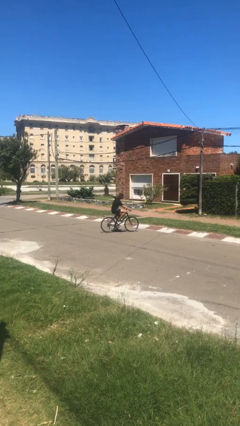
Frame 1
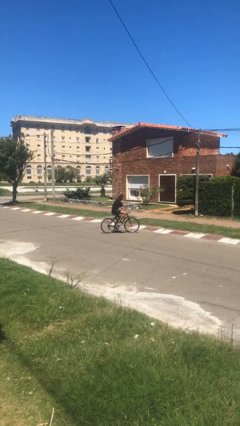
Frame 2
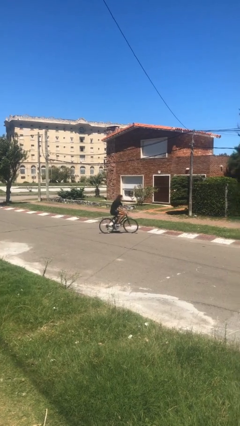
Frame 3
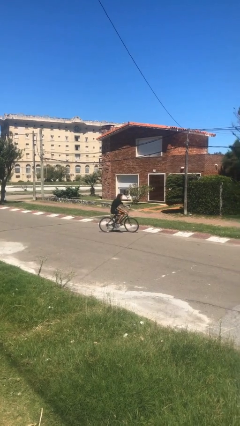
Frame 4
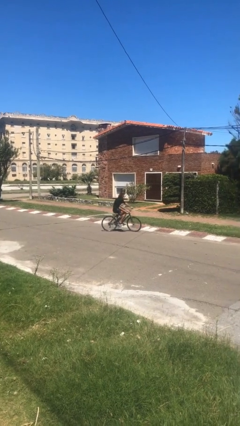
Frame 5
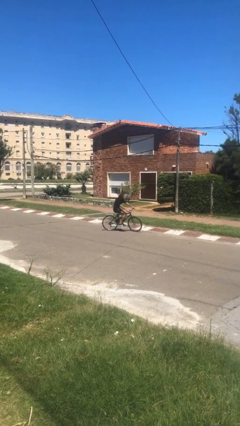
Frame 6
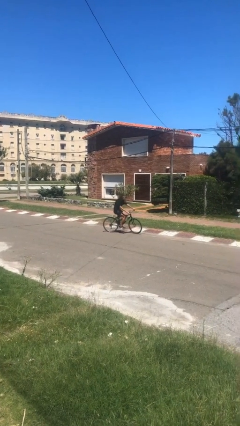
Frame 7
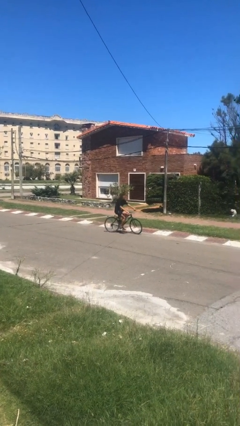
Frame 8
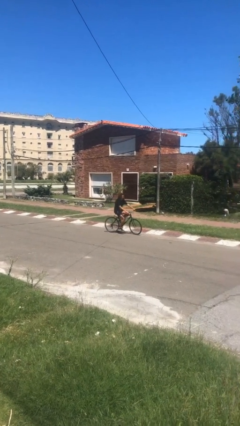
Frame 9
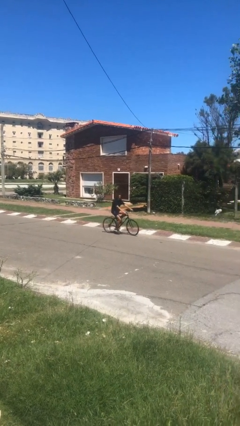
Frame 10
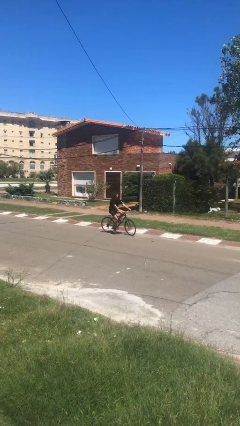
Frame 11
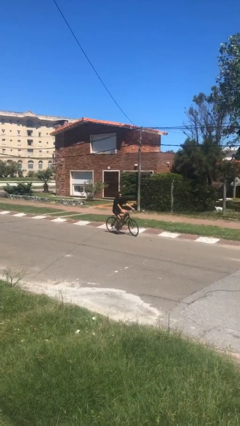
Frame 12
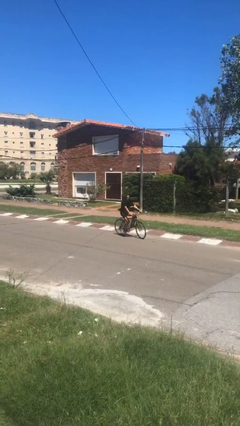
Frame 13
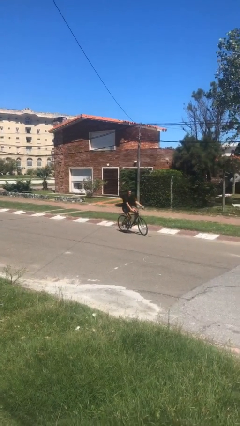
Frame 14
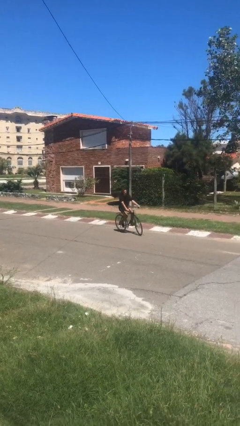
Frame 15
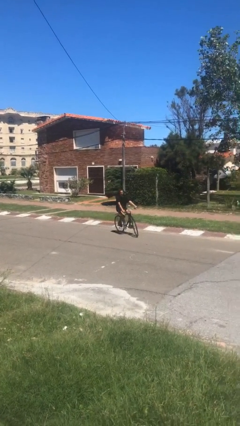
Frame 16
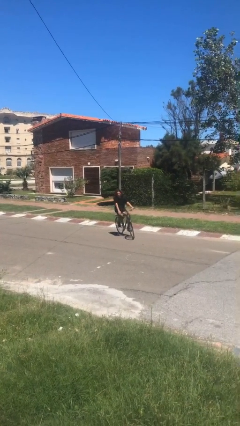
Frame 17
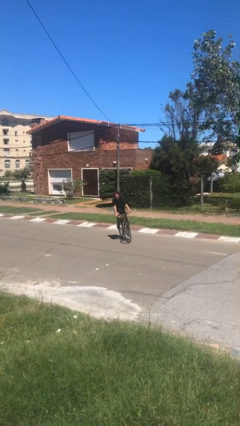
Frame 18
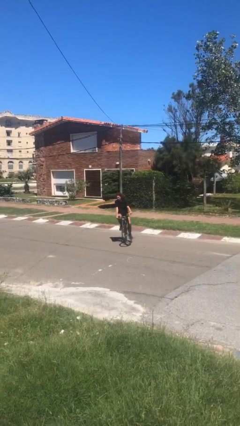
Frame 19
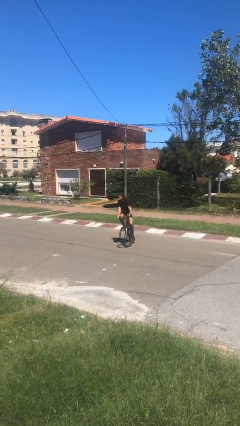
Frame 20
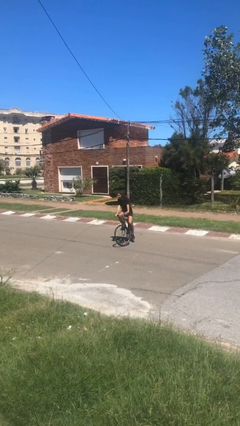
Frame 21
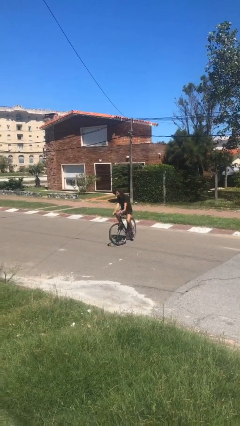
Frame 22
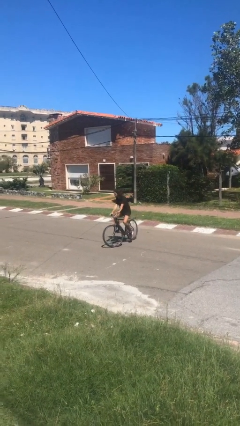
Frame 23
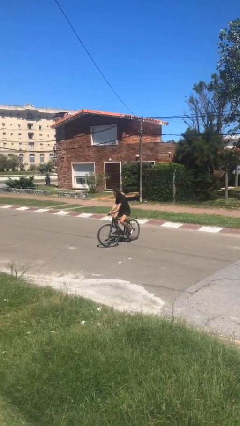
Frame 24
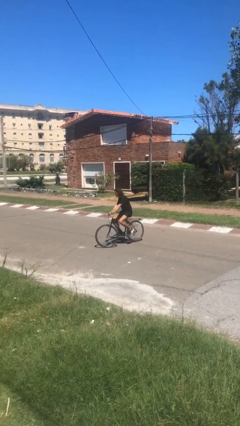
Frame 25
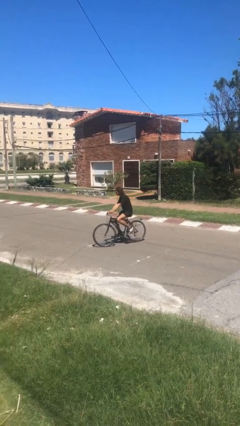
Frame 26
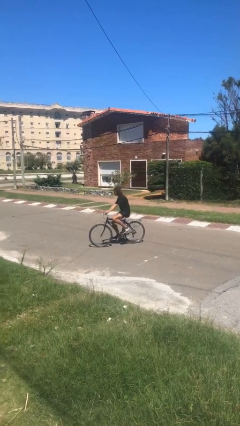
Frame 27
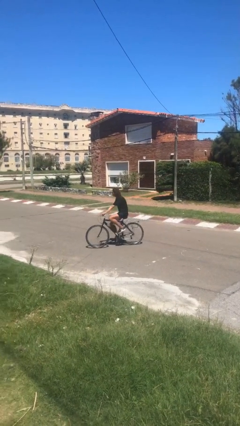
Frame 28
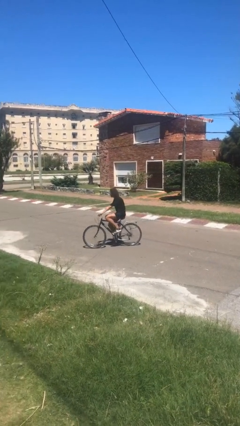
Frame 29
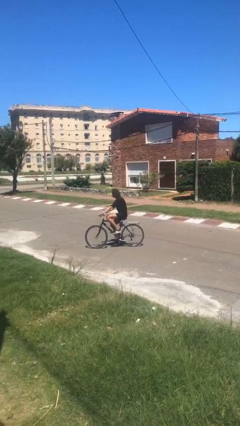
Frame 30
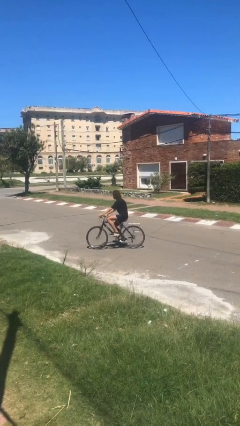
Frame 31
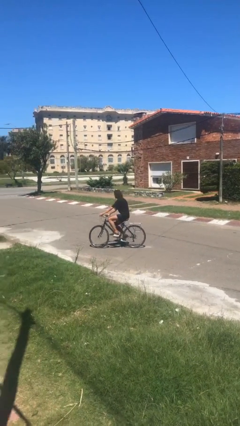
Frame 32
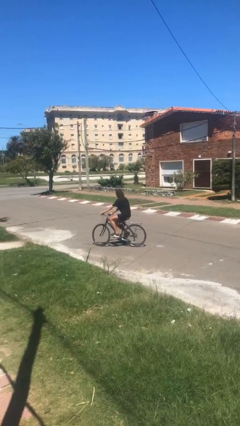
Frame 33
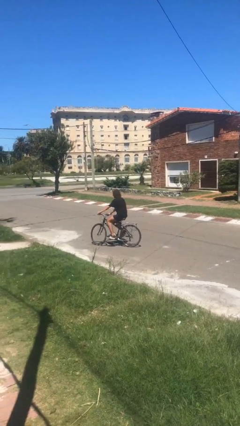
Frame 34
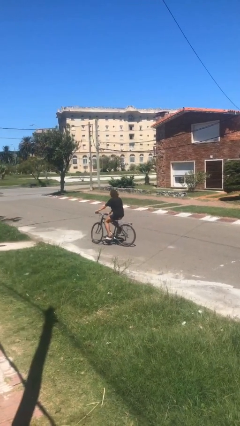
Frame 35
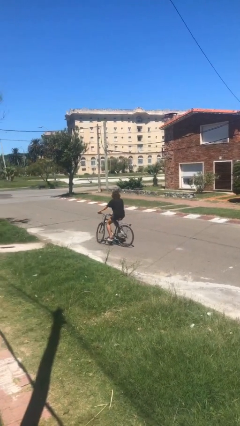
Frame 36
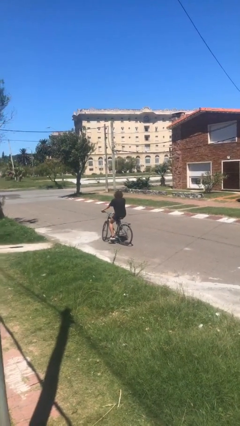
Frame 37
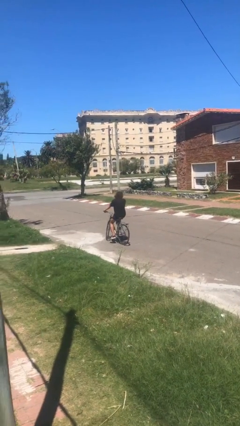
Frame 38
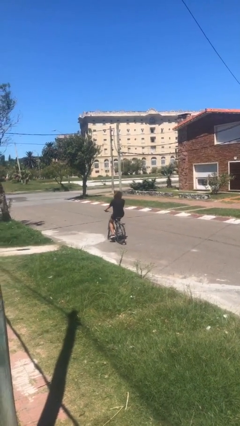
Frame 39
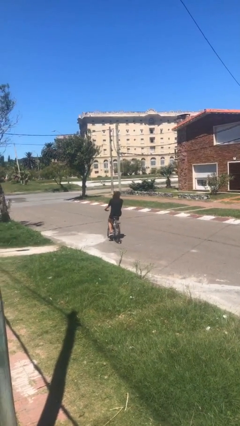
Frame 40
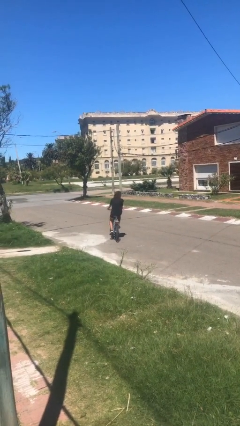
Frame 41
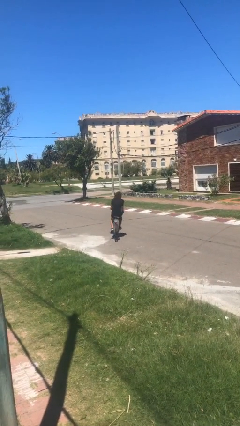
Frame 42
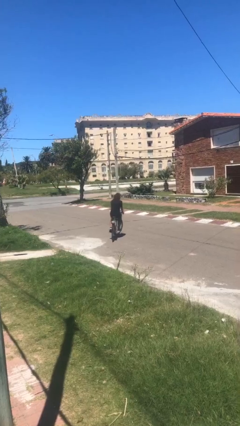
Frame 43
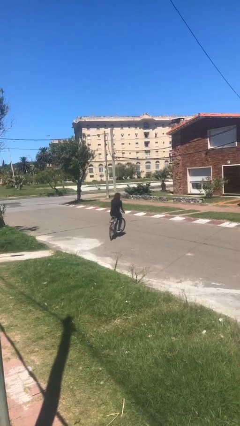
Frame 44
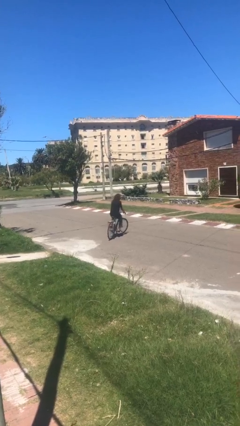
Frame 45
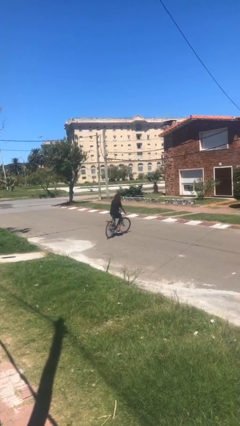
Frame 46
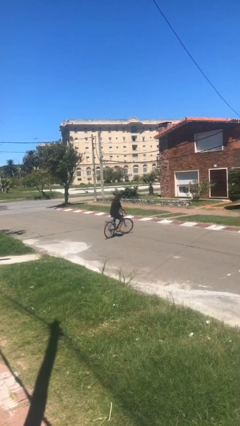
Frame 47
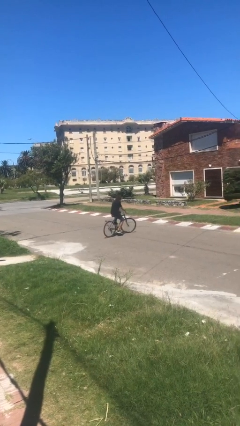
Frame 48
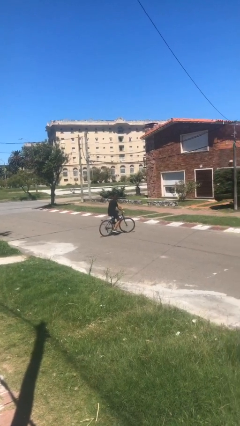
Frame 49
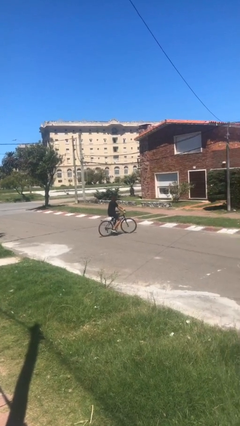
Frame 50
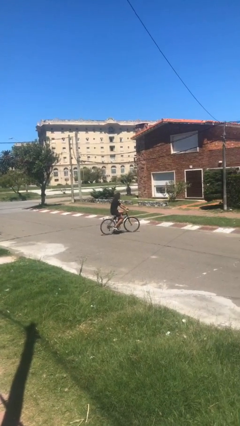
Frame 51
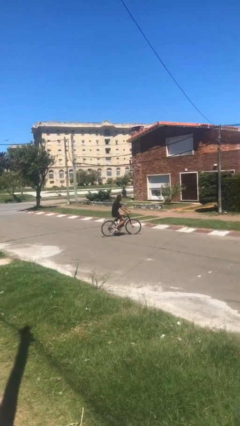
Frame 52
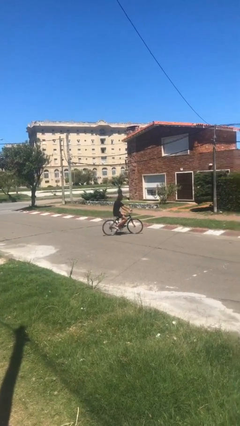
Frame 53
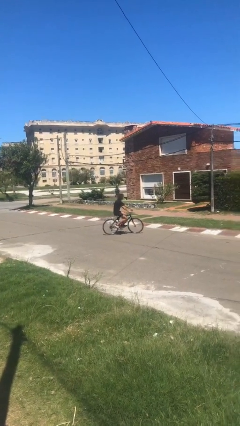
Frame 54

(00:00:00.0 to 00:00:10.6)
person rides bicycle

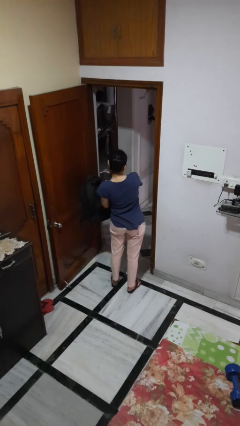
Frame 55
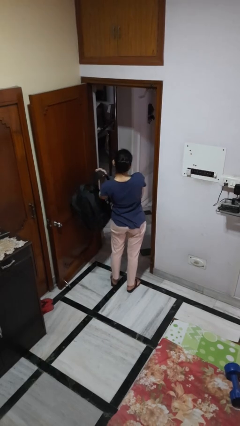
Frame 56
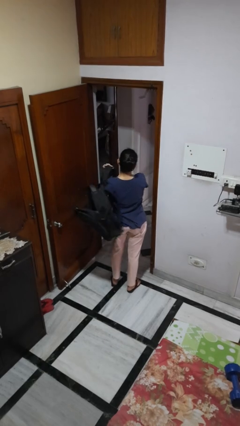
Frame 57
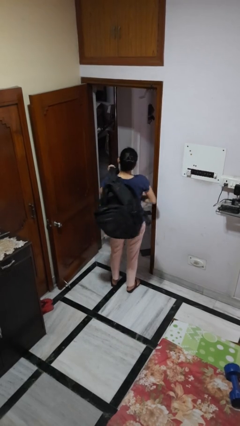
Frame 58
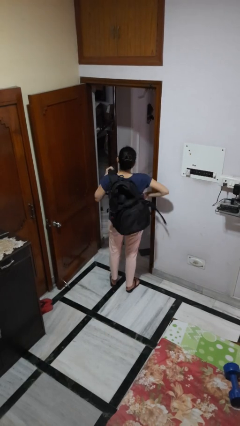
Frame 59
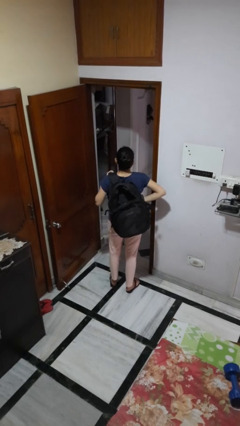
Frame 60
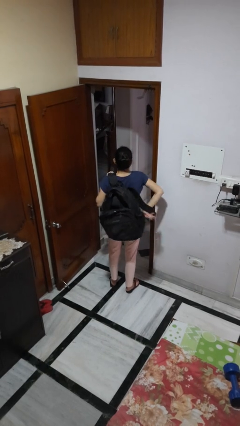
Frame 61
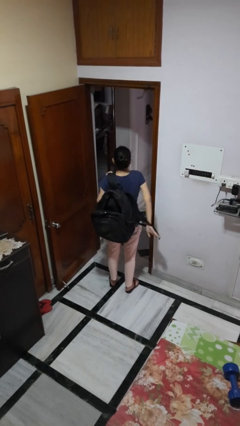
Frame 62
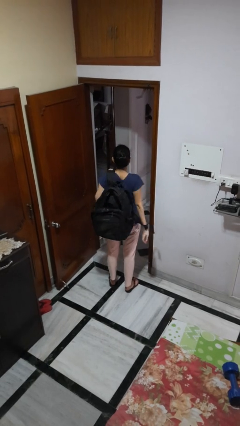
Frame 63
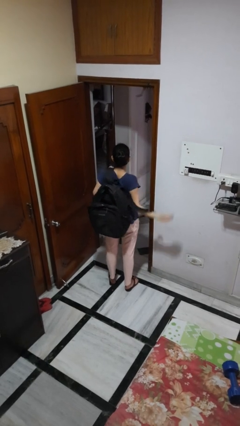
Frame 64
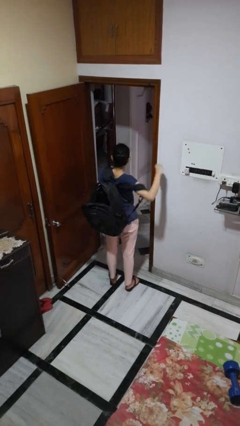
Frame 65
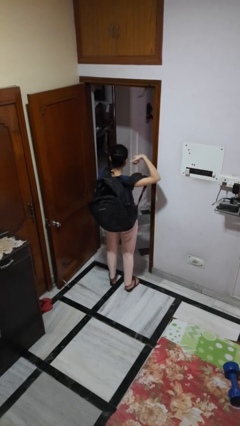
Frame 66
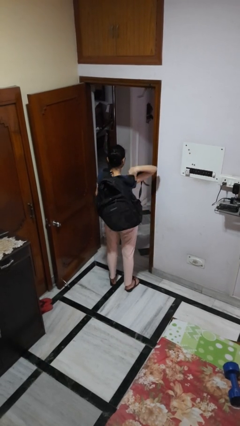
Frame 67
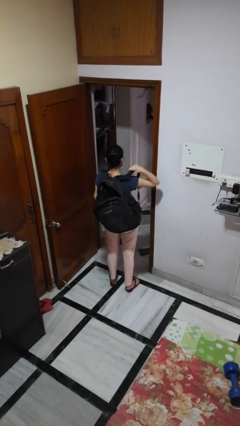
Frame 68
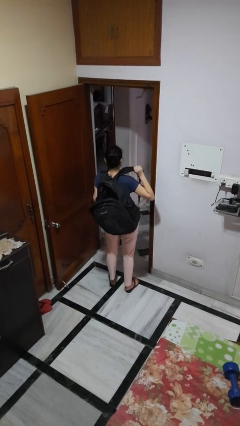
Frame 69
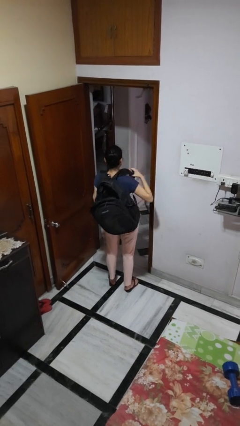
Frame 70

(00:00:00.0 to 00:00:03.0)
person puts on backpack

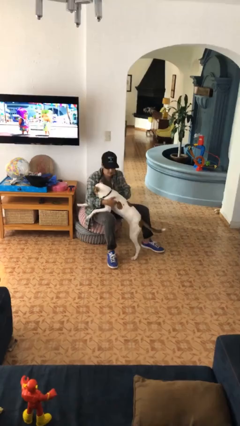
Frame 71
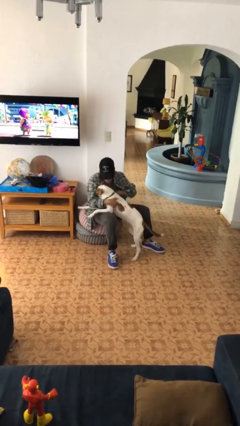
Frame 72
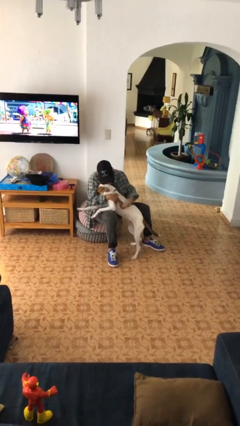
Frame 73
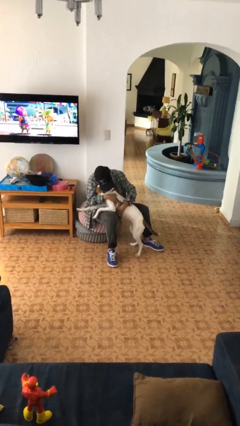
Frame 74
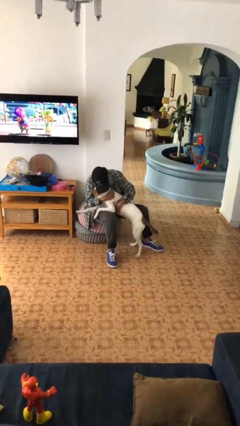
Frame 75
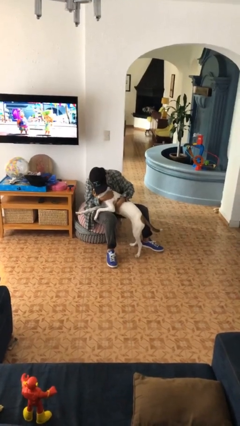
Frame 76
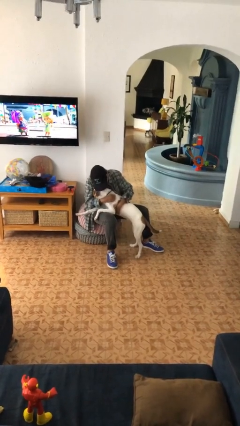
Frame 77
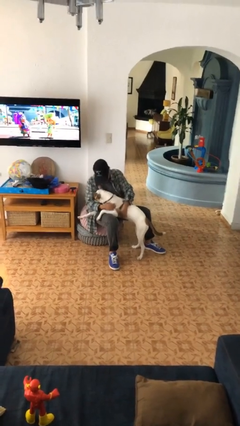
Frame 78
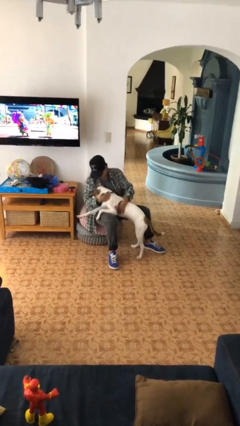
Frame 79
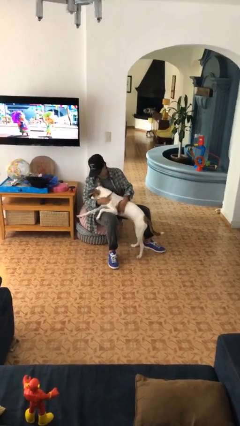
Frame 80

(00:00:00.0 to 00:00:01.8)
person hugs dog

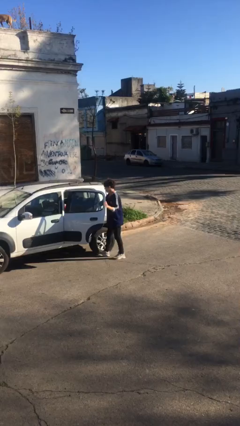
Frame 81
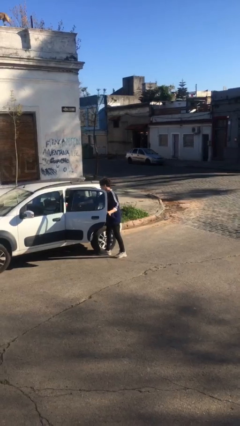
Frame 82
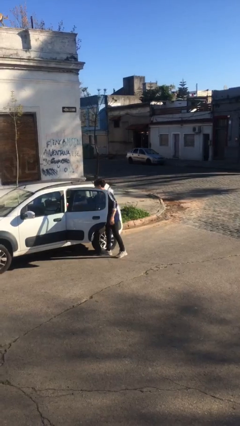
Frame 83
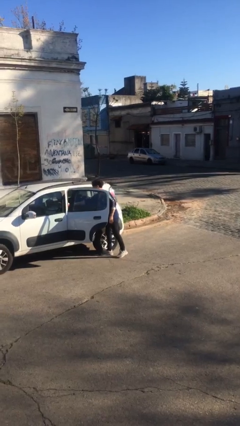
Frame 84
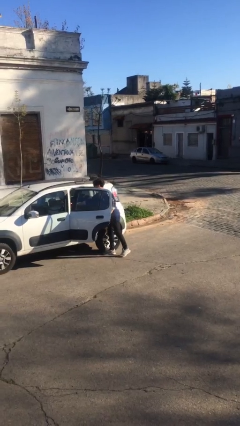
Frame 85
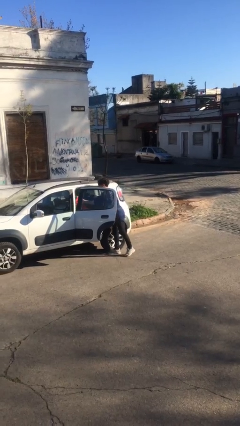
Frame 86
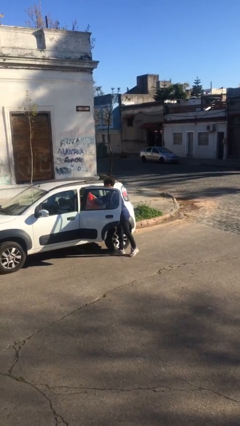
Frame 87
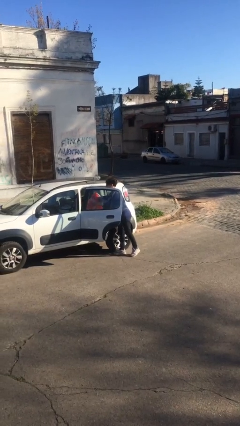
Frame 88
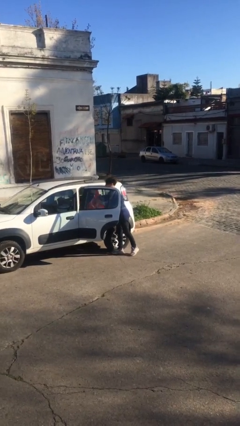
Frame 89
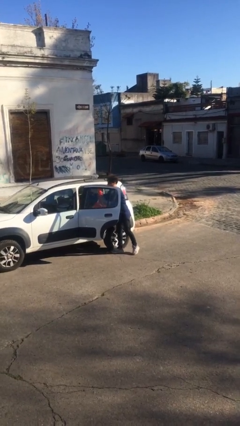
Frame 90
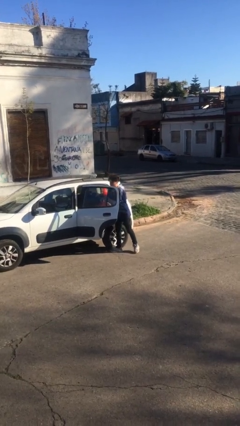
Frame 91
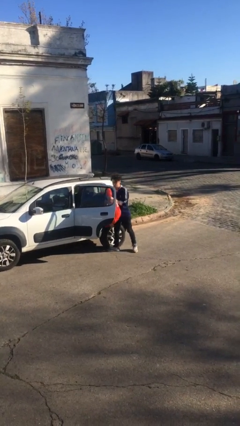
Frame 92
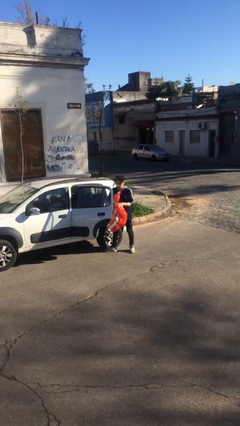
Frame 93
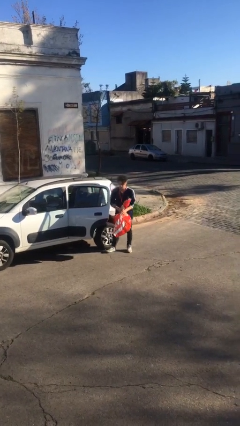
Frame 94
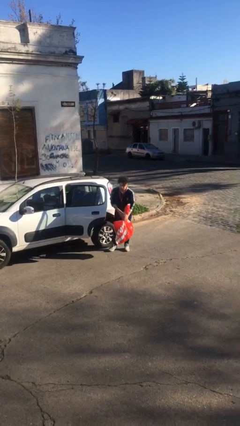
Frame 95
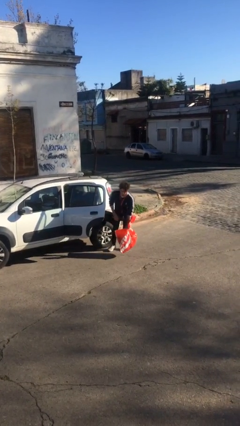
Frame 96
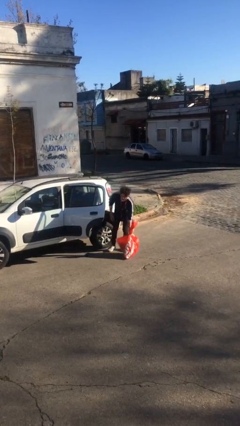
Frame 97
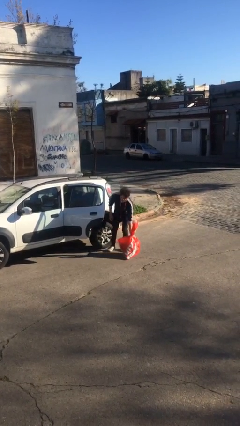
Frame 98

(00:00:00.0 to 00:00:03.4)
person unloads car
